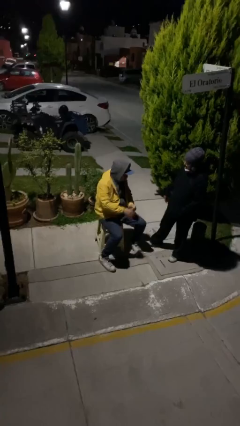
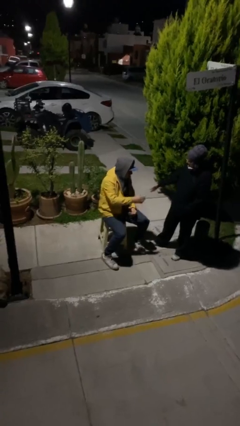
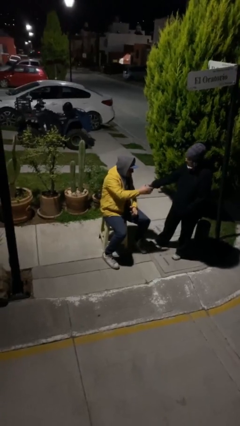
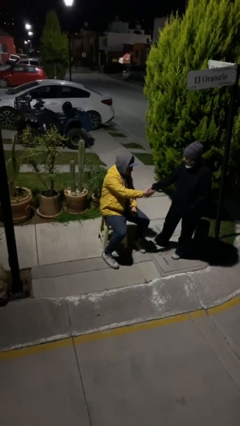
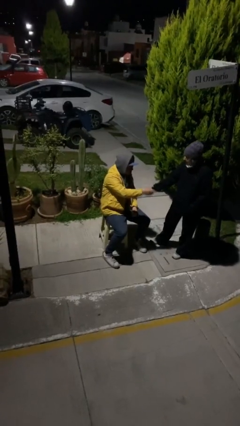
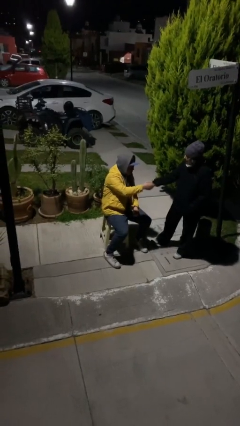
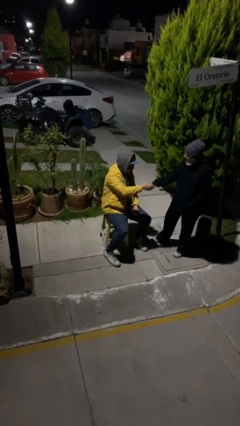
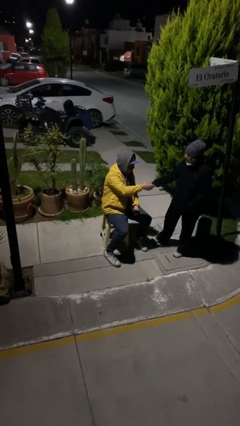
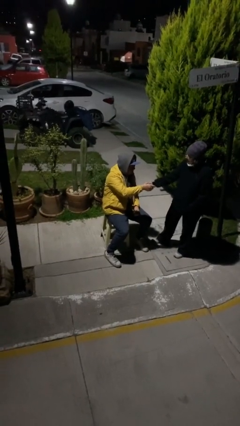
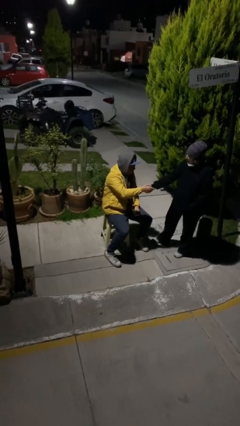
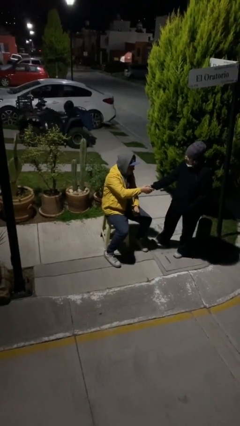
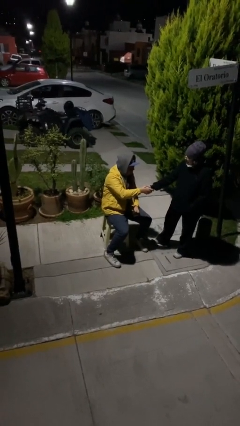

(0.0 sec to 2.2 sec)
person shakes hand

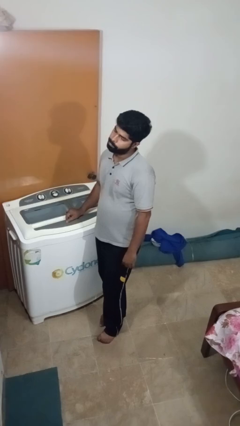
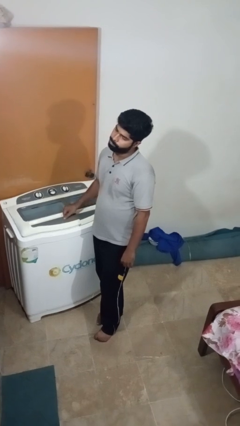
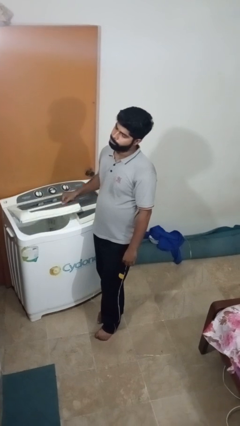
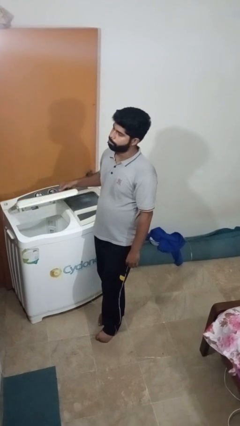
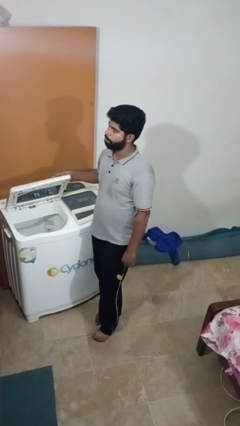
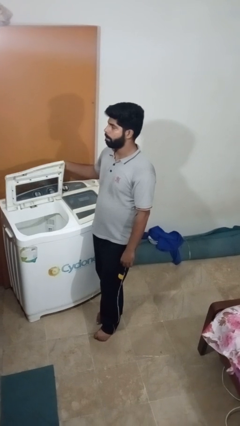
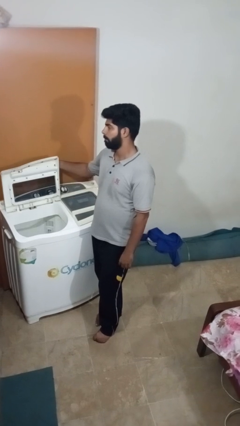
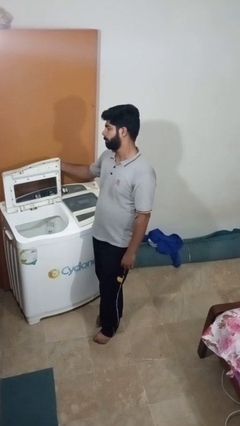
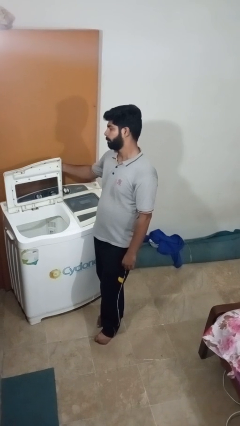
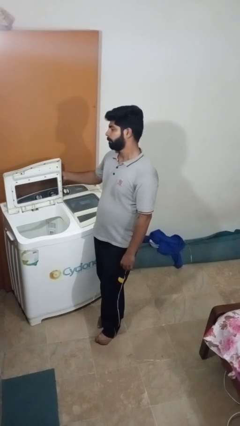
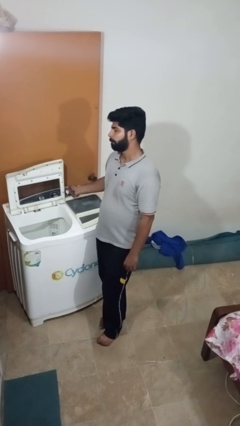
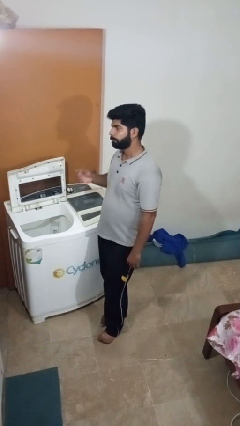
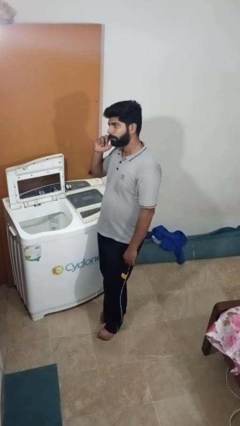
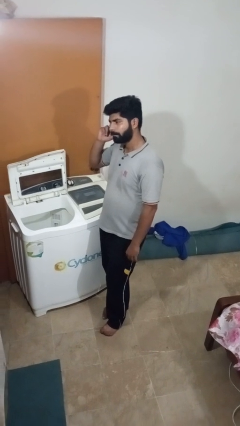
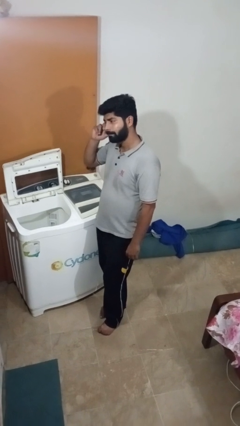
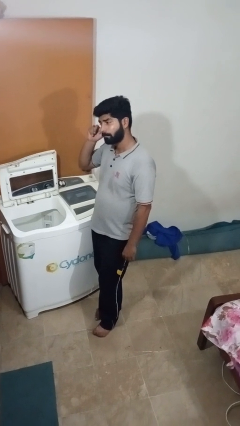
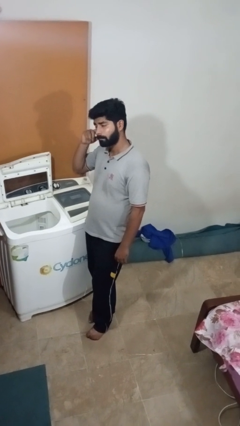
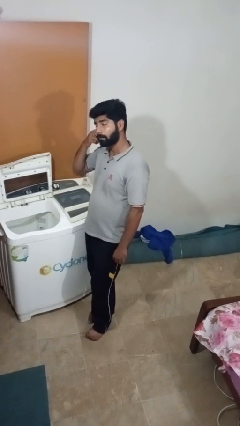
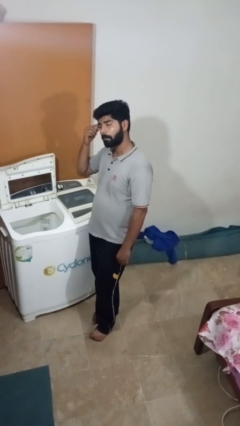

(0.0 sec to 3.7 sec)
person opens clothes washer

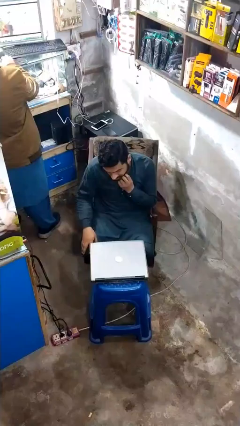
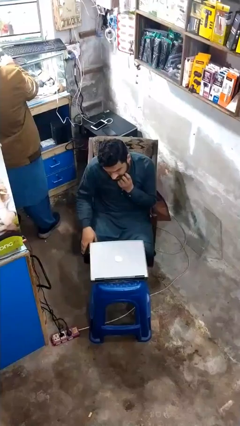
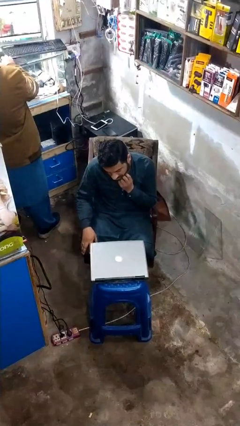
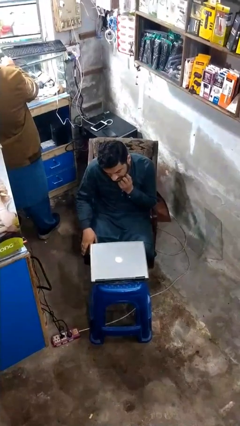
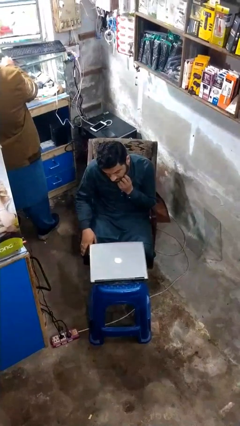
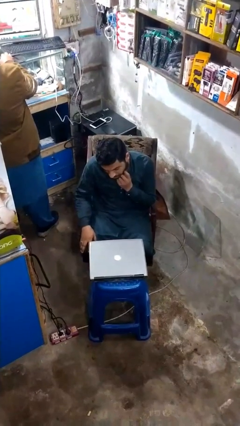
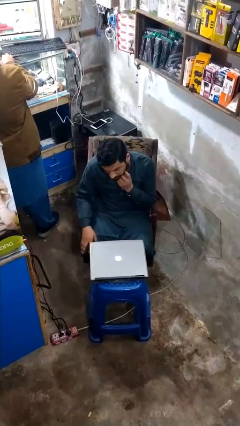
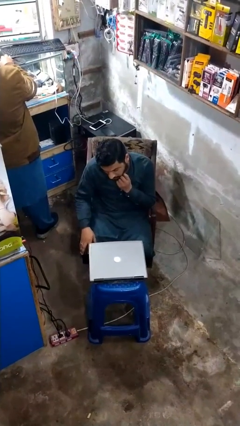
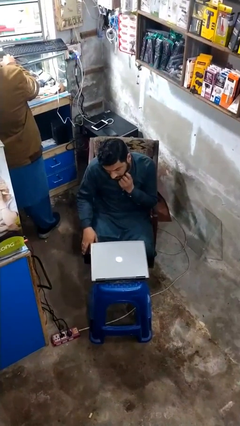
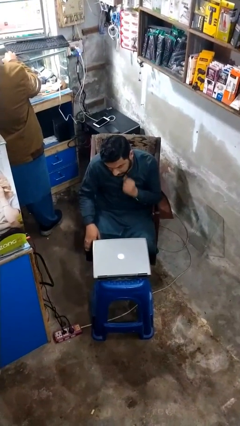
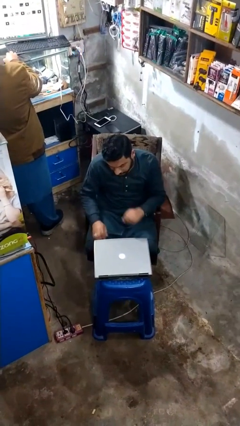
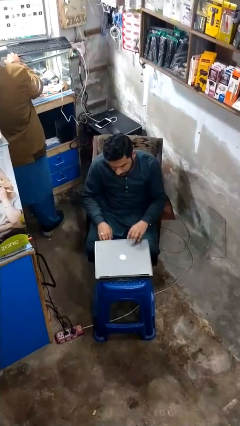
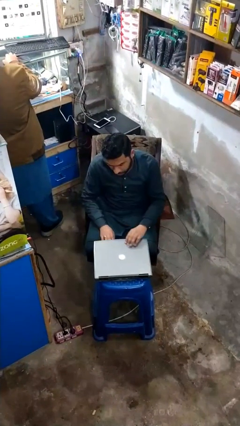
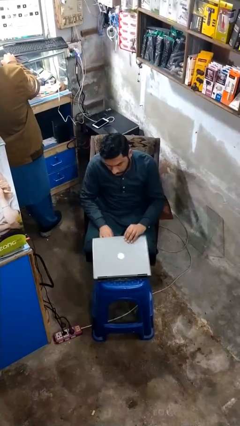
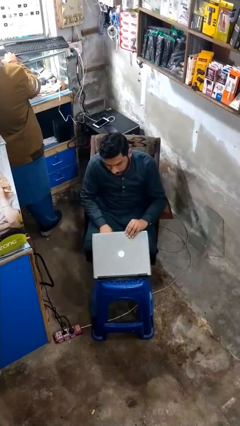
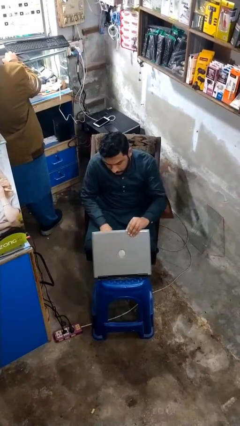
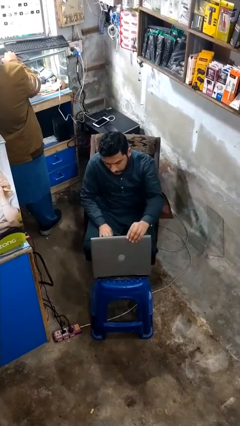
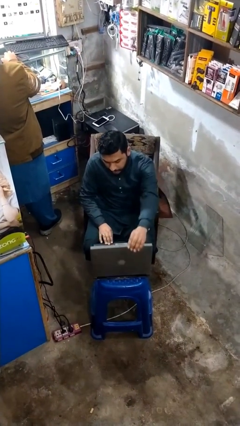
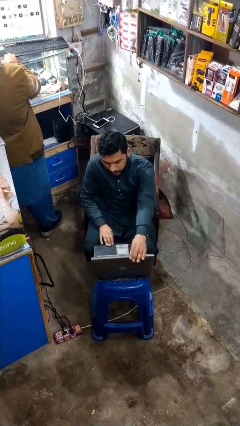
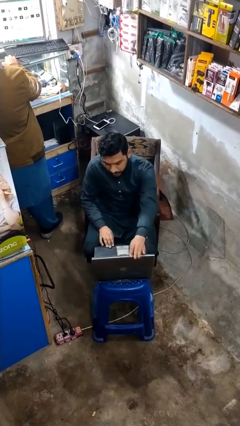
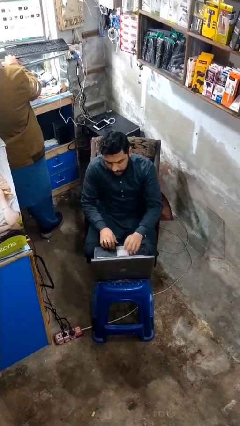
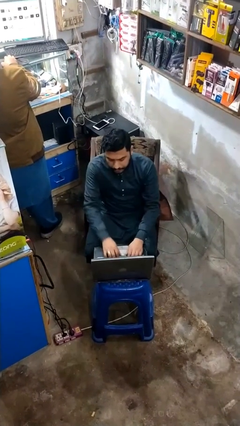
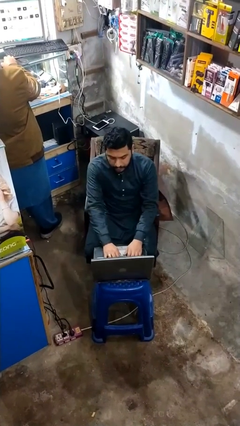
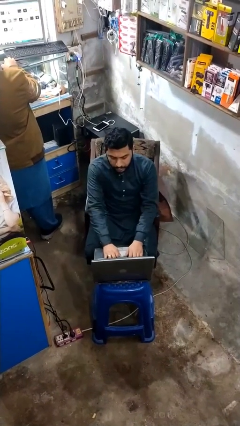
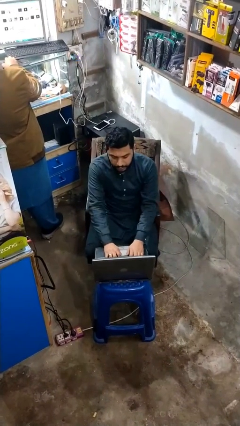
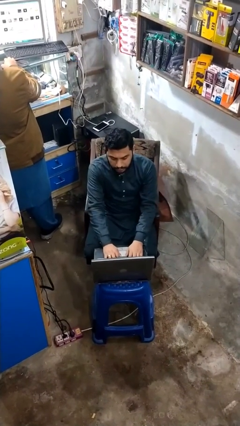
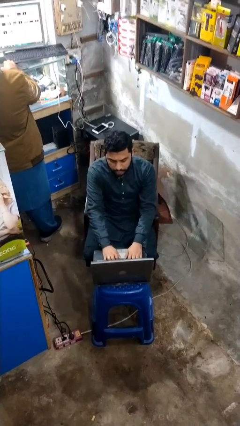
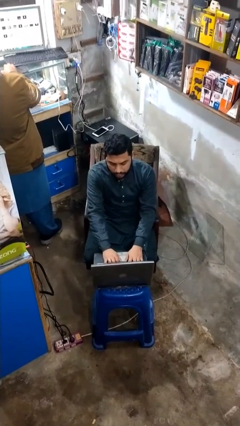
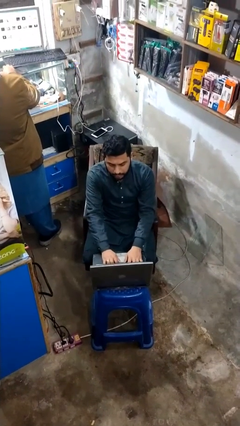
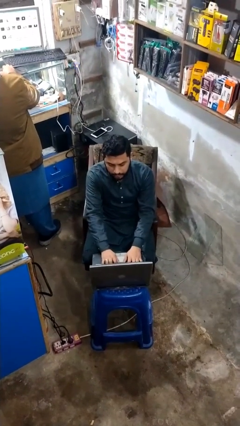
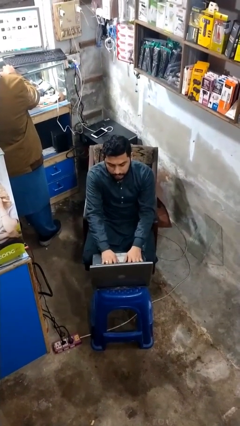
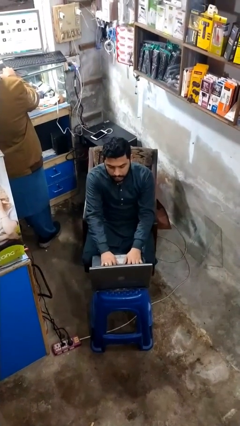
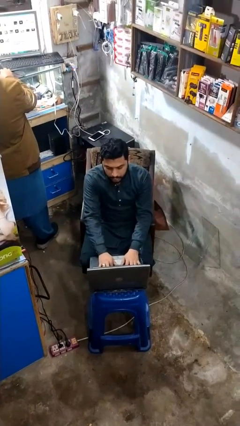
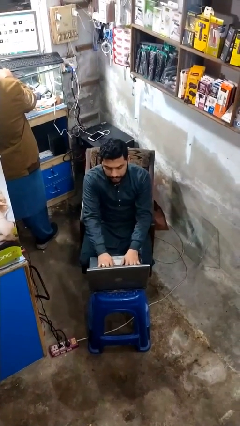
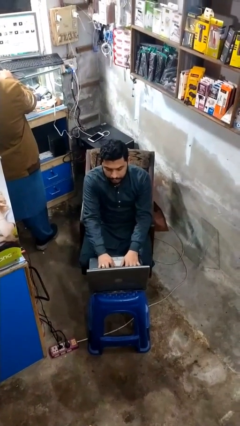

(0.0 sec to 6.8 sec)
person interacts with laptop

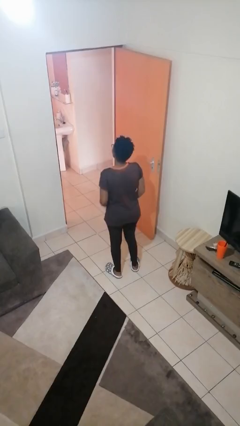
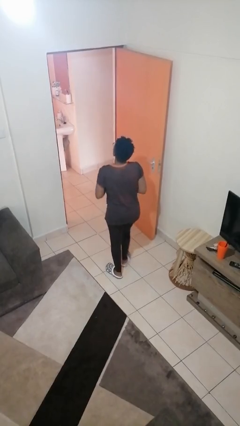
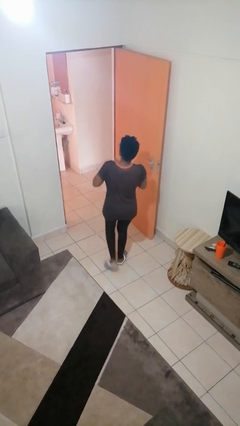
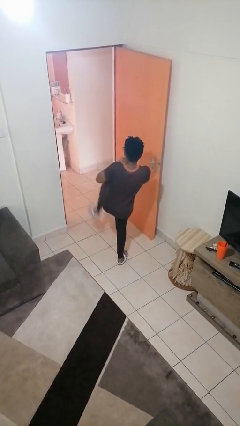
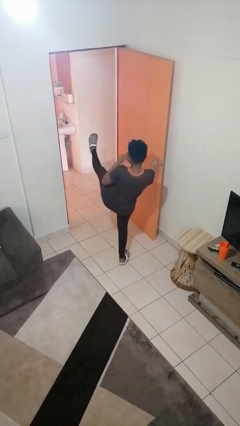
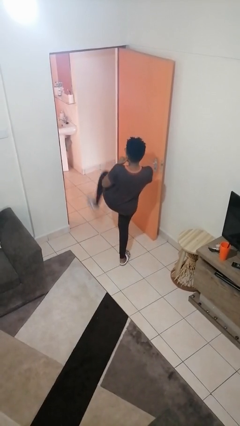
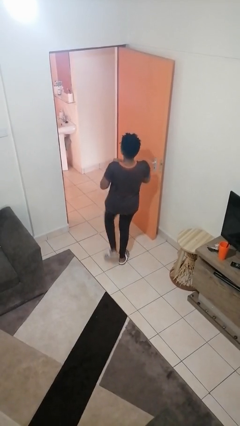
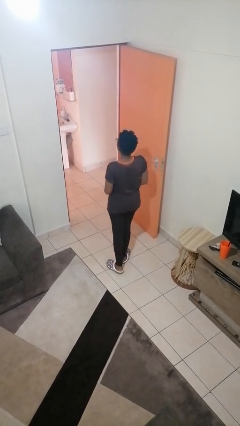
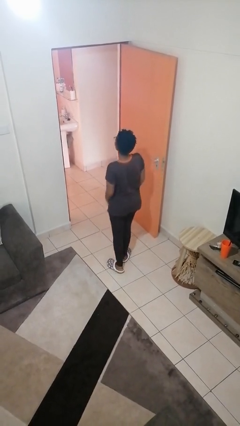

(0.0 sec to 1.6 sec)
person karate kicks

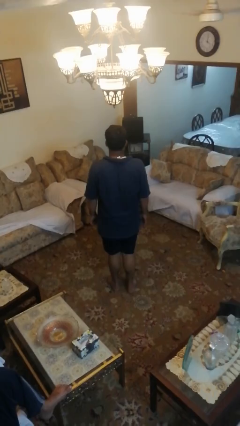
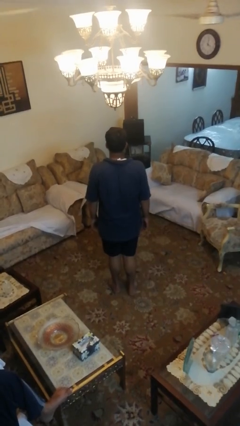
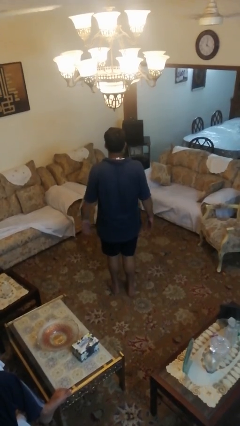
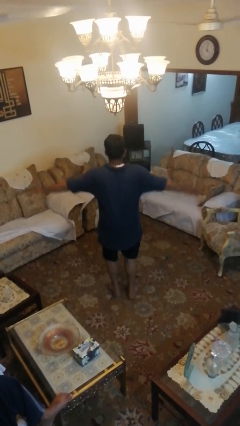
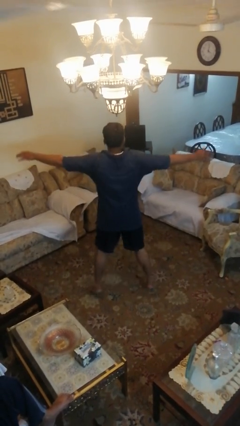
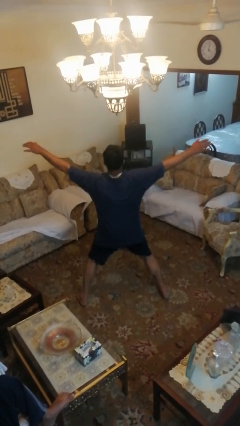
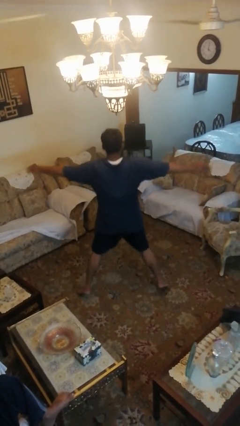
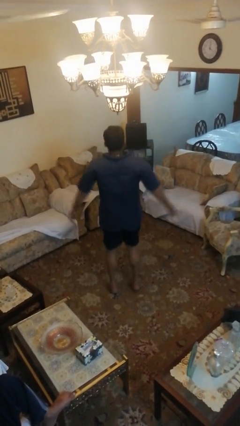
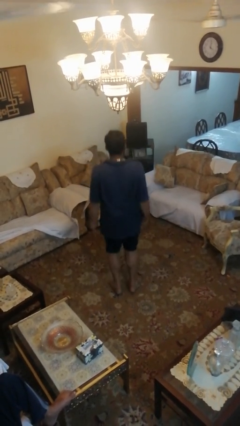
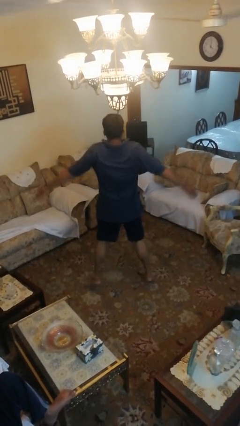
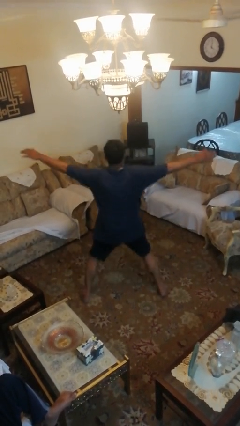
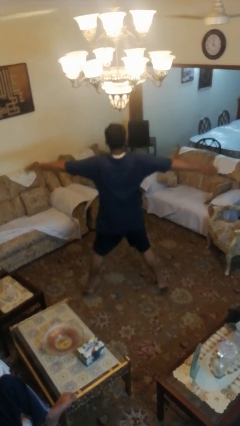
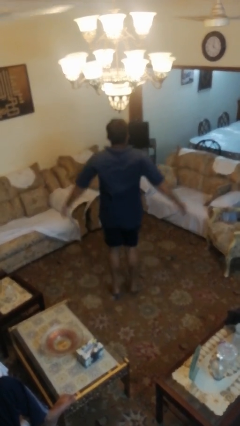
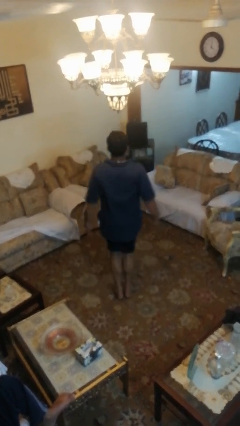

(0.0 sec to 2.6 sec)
person exercises with jumping jacks

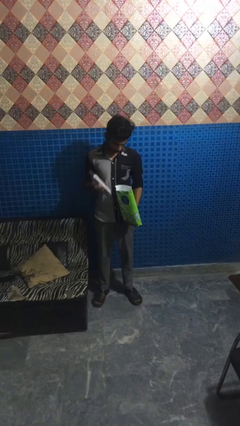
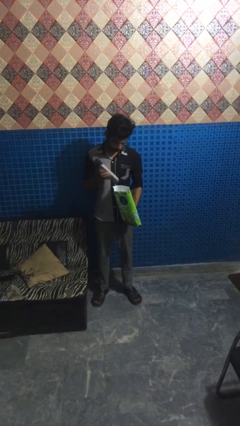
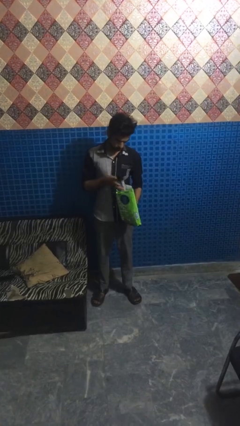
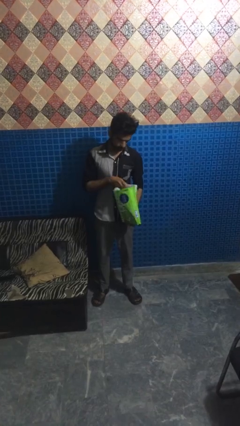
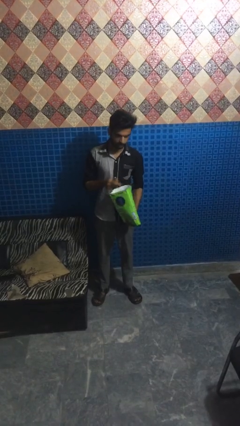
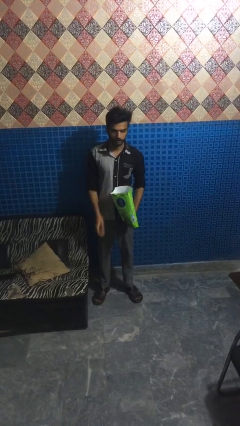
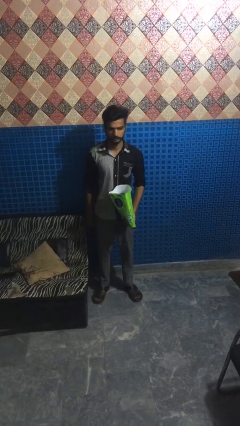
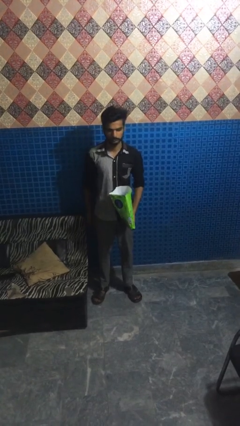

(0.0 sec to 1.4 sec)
person puts object into bag
